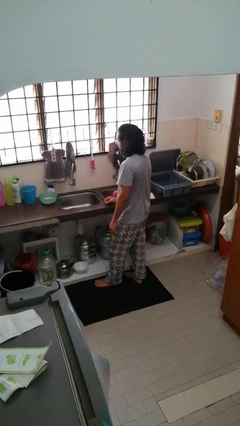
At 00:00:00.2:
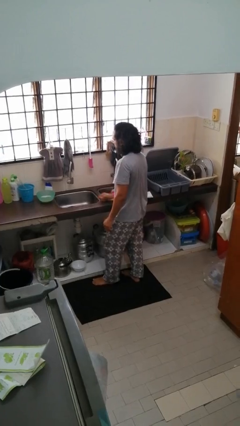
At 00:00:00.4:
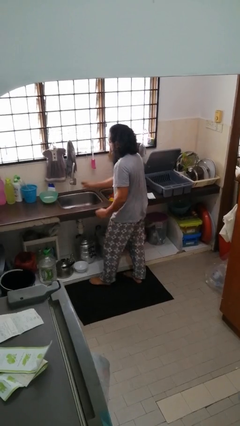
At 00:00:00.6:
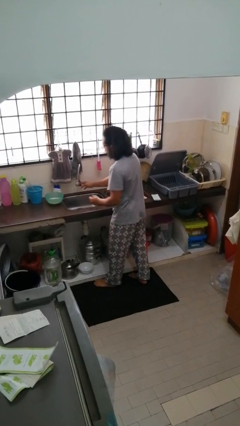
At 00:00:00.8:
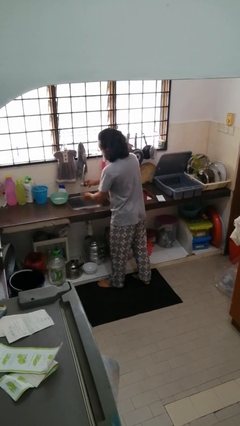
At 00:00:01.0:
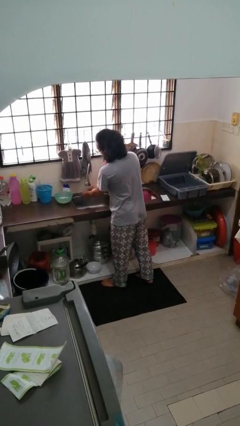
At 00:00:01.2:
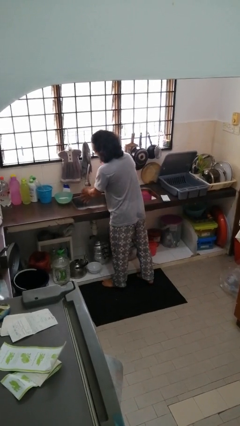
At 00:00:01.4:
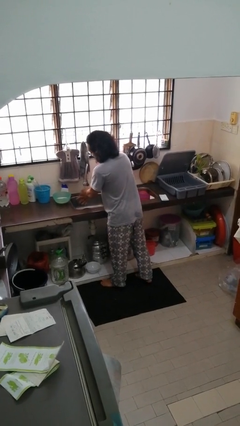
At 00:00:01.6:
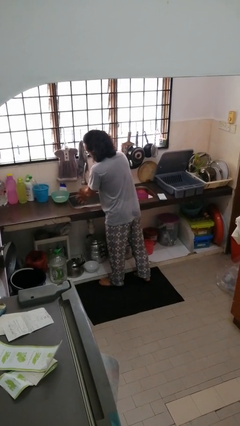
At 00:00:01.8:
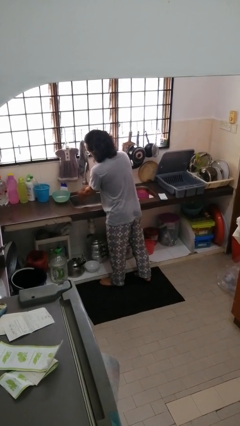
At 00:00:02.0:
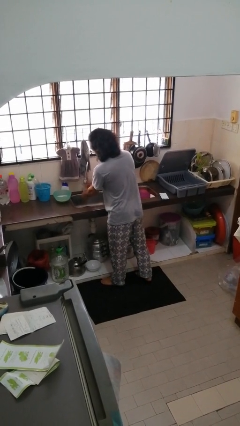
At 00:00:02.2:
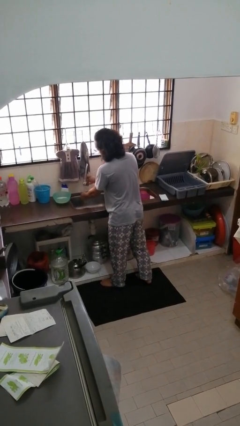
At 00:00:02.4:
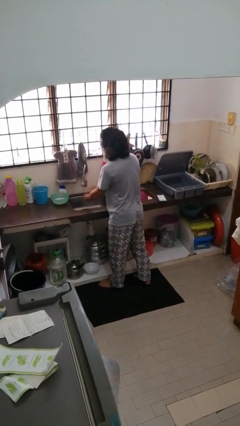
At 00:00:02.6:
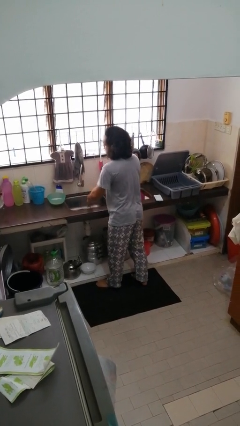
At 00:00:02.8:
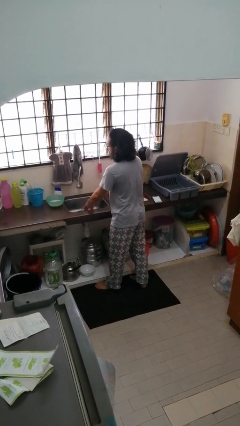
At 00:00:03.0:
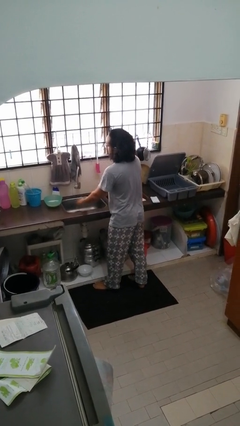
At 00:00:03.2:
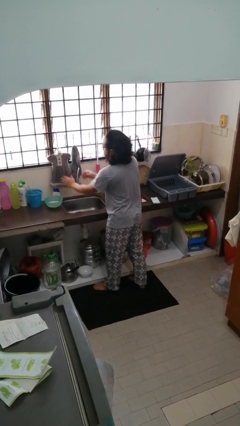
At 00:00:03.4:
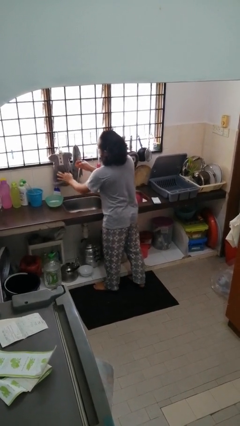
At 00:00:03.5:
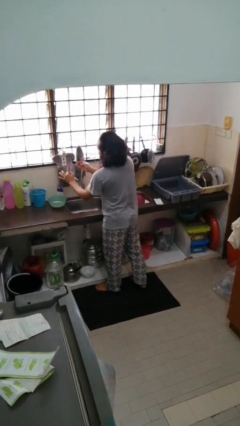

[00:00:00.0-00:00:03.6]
person washes hands

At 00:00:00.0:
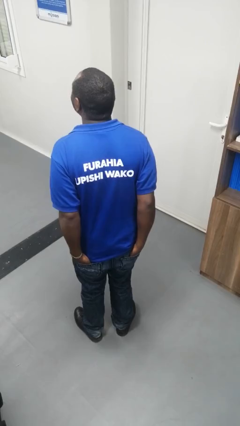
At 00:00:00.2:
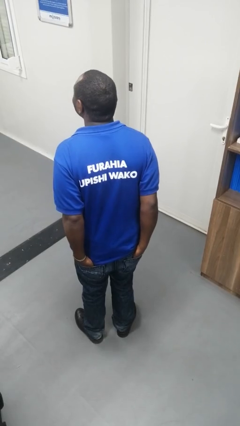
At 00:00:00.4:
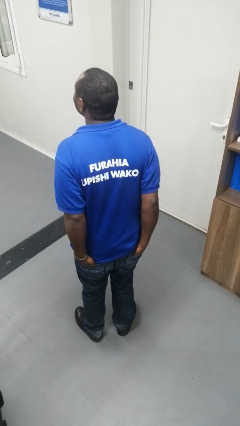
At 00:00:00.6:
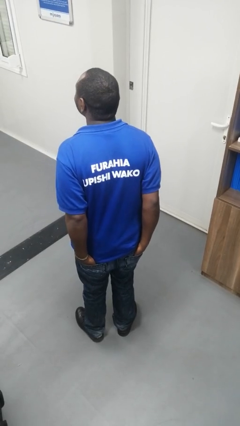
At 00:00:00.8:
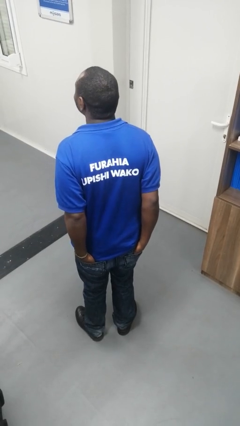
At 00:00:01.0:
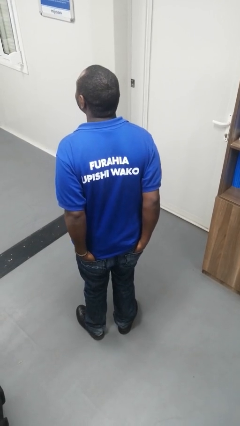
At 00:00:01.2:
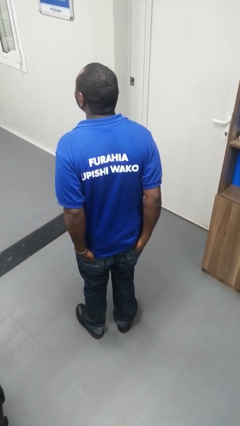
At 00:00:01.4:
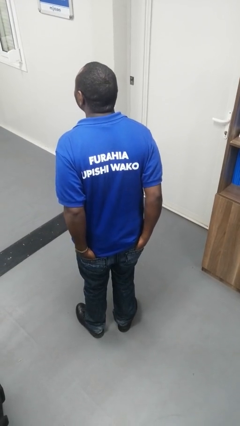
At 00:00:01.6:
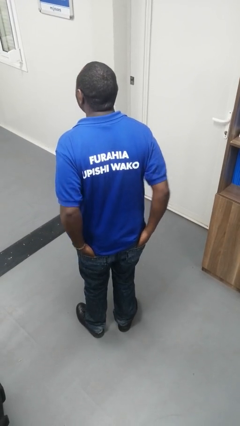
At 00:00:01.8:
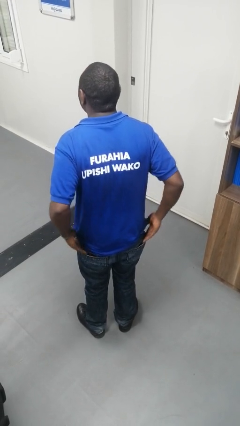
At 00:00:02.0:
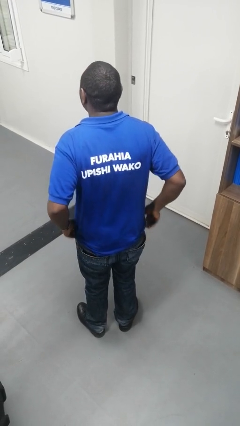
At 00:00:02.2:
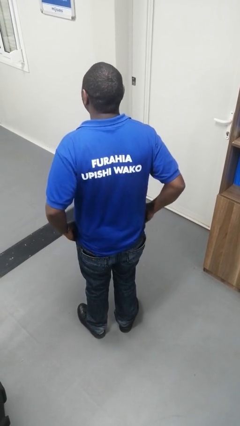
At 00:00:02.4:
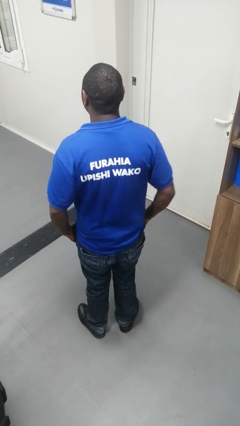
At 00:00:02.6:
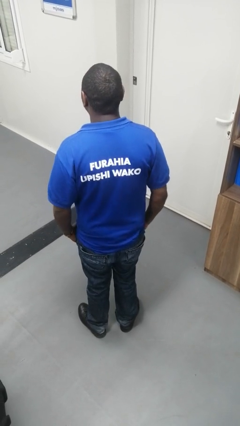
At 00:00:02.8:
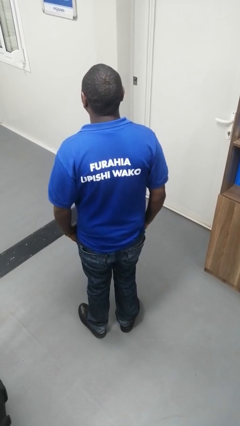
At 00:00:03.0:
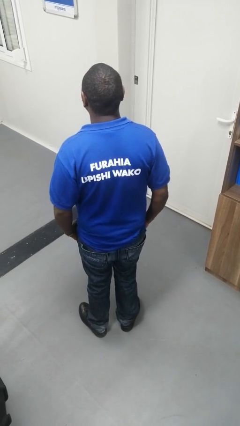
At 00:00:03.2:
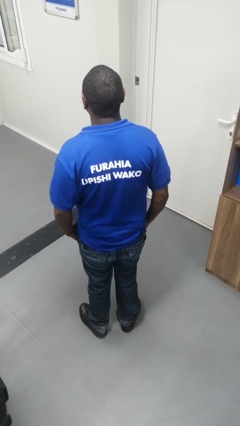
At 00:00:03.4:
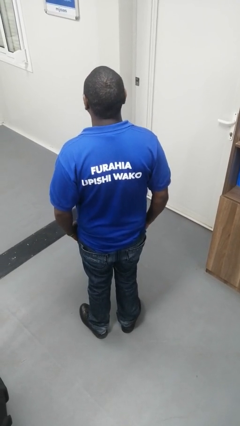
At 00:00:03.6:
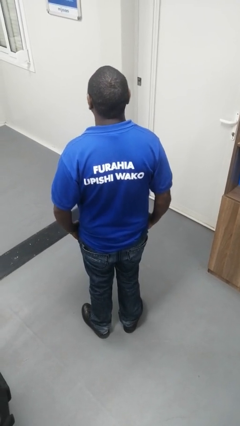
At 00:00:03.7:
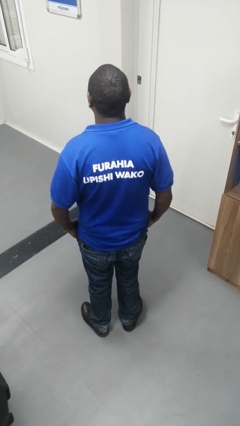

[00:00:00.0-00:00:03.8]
person puts hands in back pockets

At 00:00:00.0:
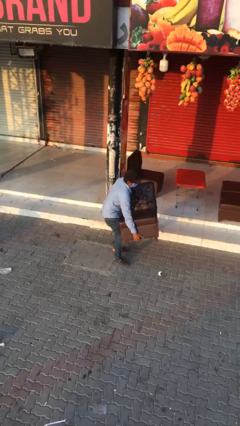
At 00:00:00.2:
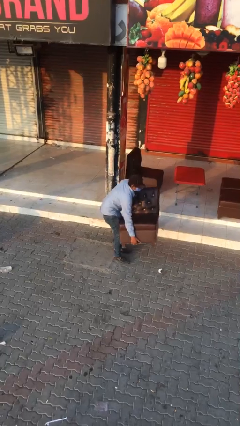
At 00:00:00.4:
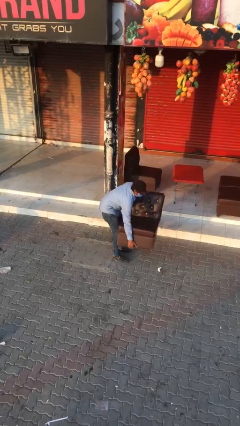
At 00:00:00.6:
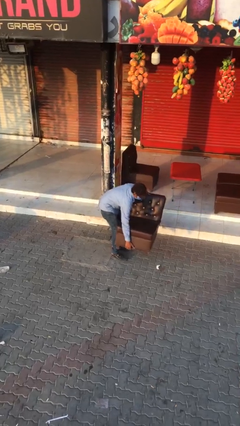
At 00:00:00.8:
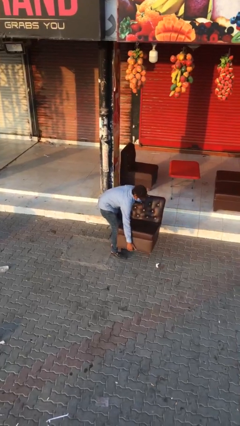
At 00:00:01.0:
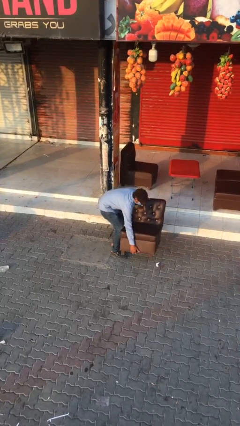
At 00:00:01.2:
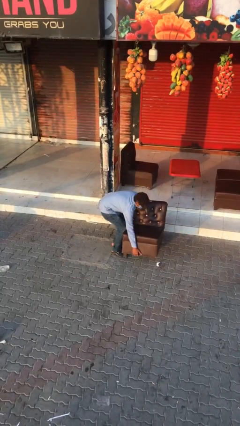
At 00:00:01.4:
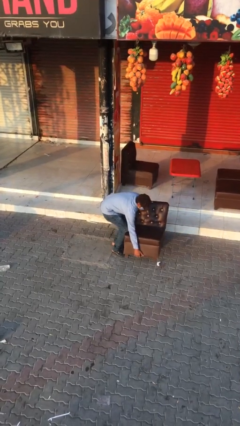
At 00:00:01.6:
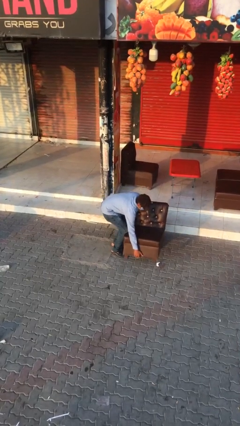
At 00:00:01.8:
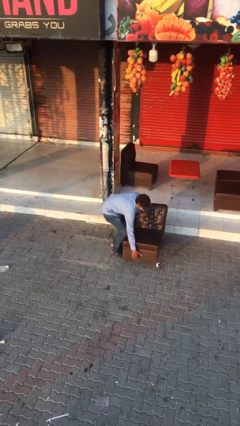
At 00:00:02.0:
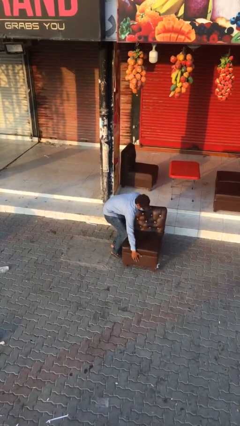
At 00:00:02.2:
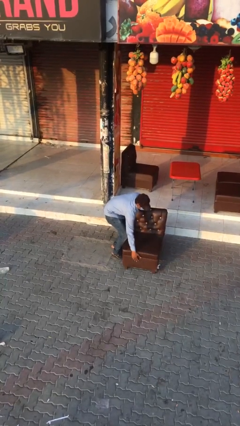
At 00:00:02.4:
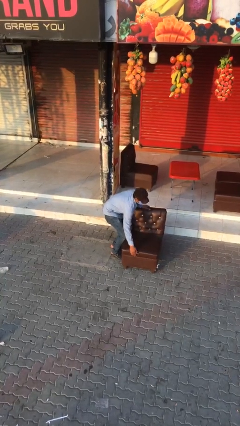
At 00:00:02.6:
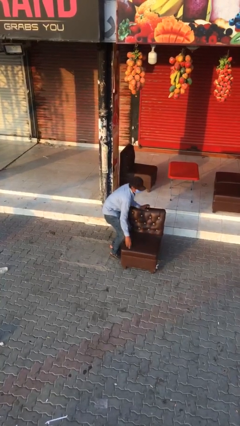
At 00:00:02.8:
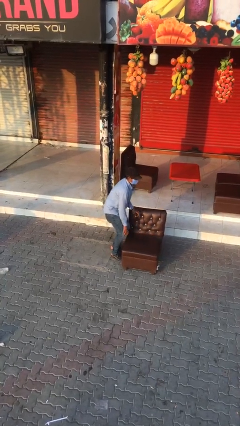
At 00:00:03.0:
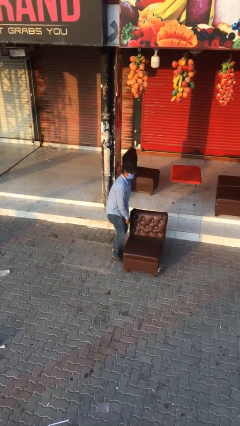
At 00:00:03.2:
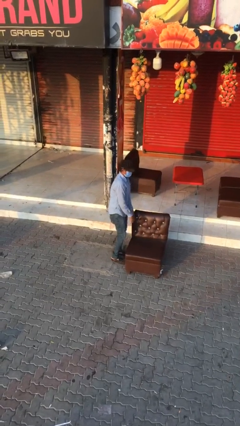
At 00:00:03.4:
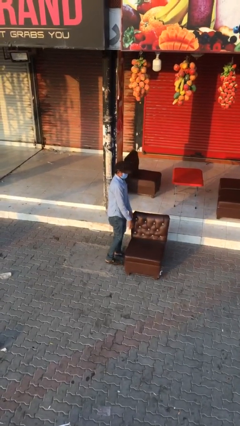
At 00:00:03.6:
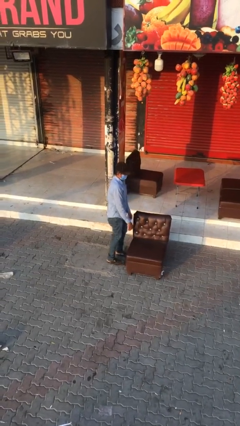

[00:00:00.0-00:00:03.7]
person puts down object on floor

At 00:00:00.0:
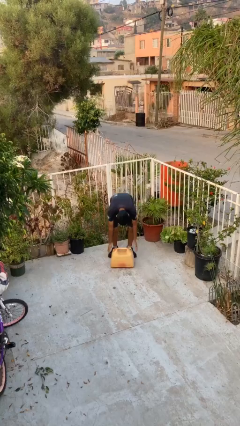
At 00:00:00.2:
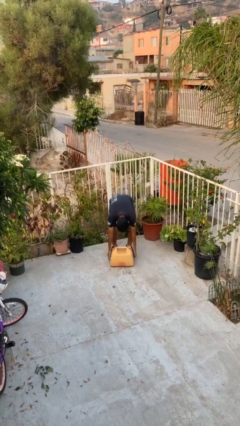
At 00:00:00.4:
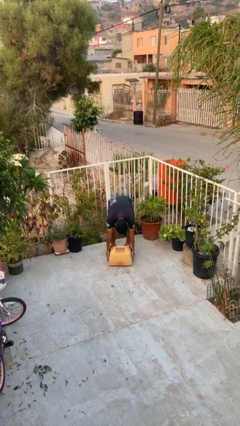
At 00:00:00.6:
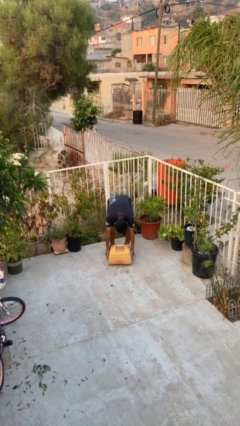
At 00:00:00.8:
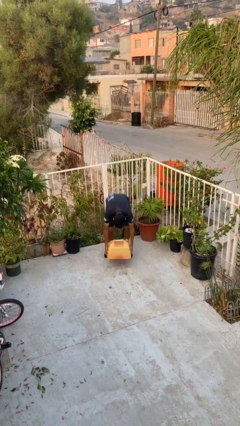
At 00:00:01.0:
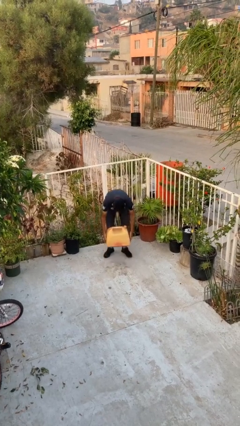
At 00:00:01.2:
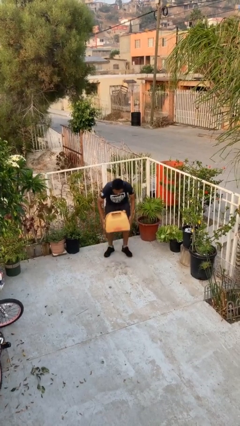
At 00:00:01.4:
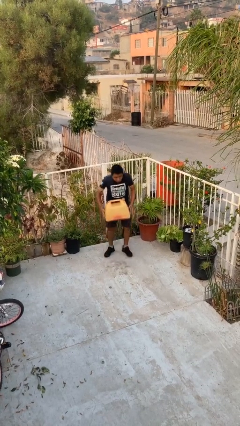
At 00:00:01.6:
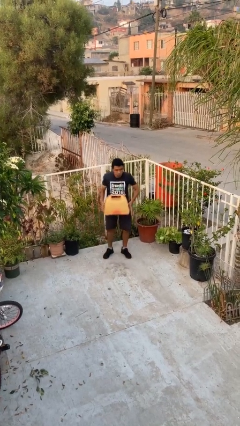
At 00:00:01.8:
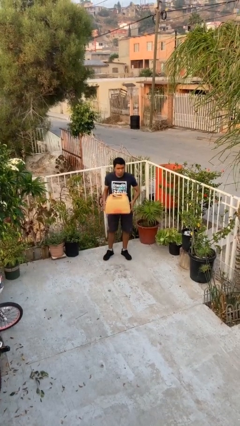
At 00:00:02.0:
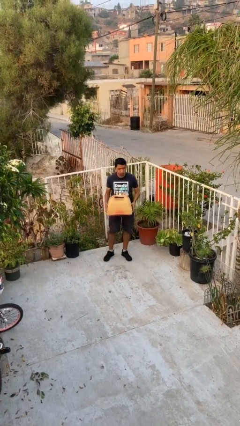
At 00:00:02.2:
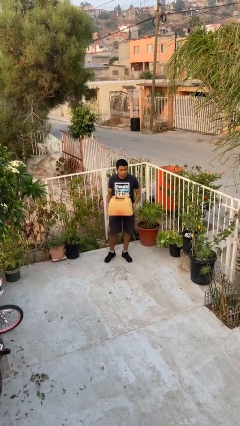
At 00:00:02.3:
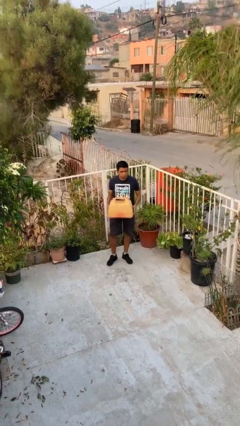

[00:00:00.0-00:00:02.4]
person picks up object from floor

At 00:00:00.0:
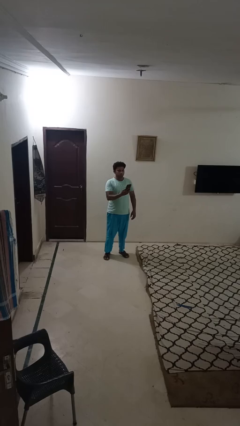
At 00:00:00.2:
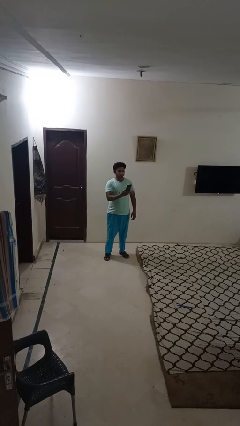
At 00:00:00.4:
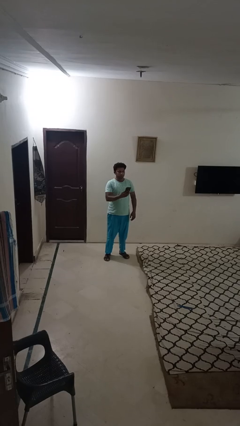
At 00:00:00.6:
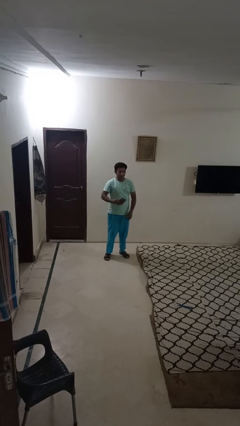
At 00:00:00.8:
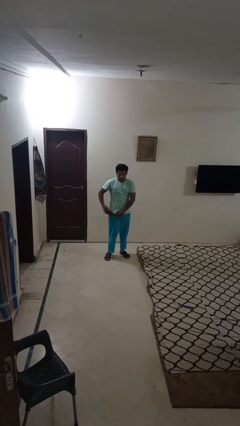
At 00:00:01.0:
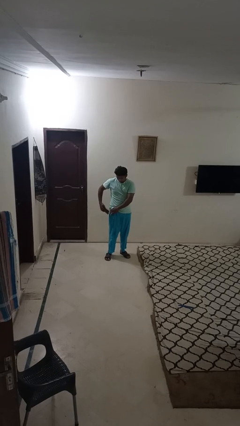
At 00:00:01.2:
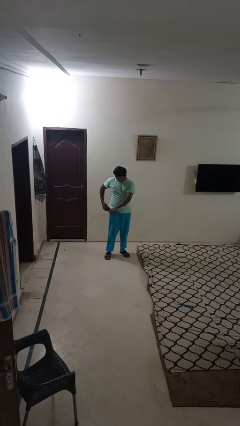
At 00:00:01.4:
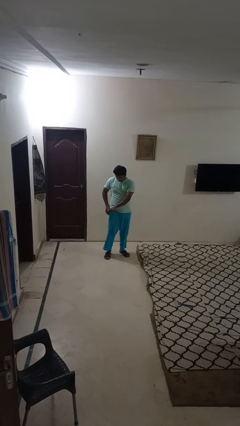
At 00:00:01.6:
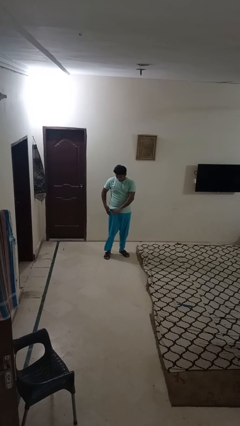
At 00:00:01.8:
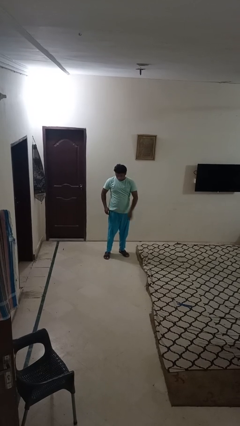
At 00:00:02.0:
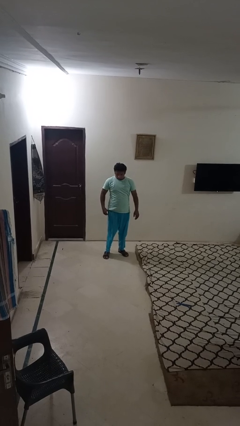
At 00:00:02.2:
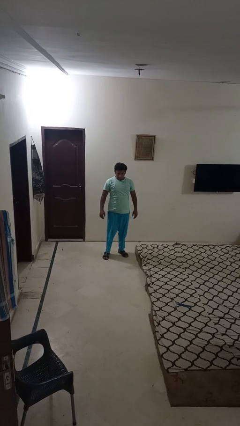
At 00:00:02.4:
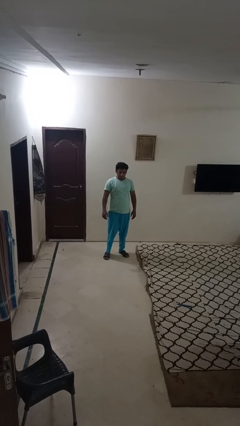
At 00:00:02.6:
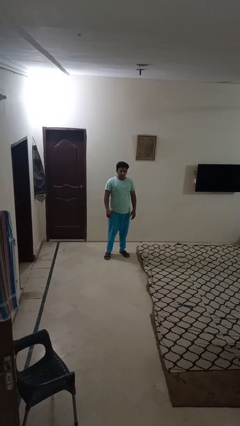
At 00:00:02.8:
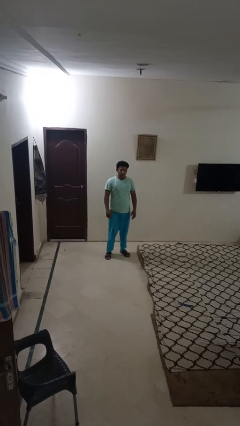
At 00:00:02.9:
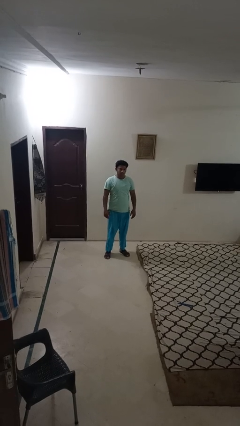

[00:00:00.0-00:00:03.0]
person puts phone into pocket

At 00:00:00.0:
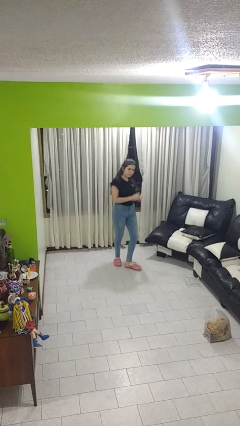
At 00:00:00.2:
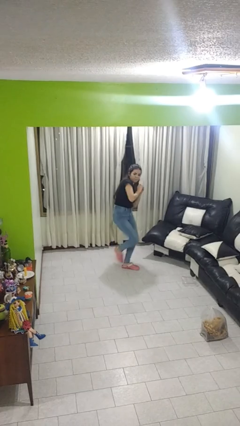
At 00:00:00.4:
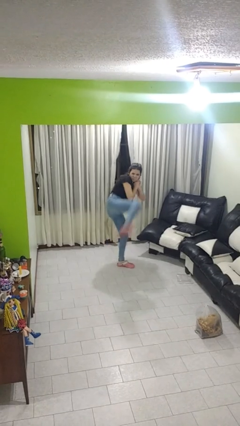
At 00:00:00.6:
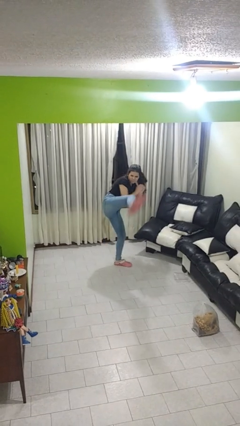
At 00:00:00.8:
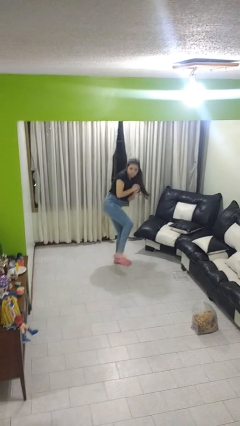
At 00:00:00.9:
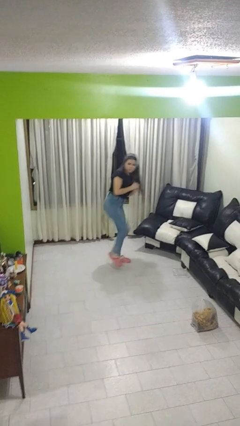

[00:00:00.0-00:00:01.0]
person karate kicks
